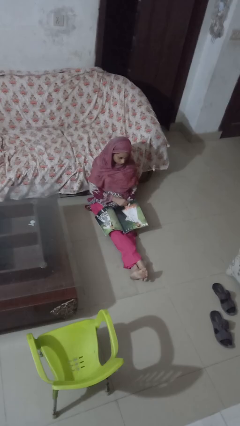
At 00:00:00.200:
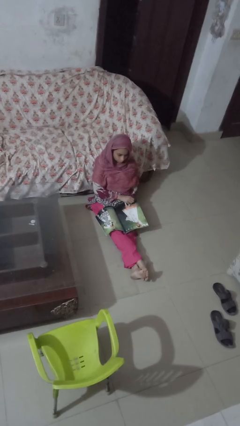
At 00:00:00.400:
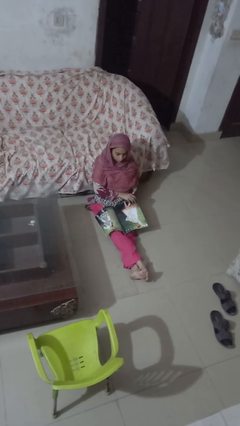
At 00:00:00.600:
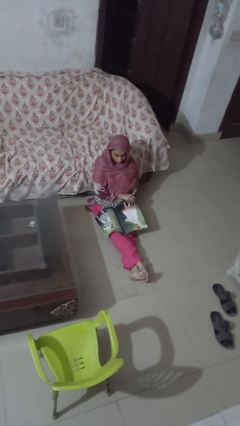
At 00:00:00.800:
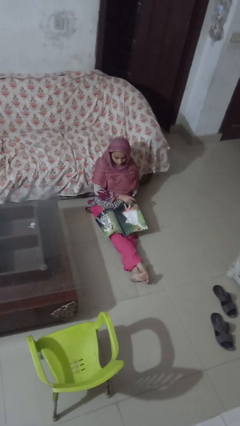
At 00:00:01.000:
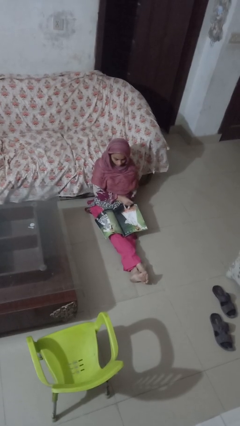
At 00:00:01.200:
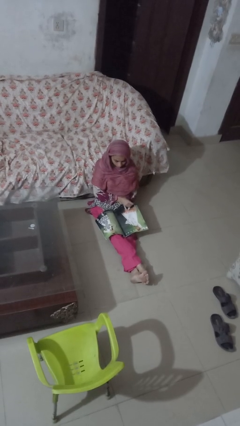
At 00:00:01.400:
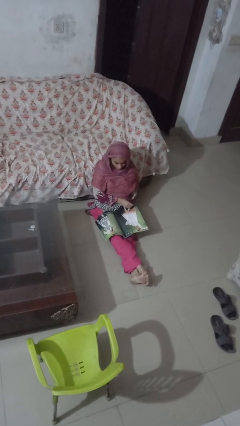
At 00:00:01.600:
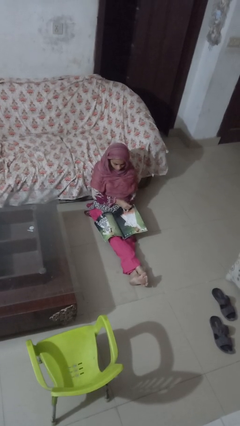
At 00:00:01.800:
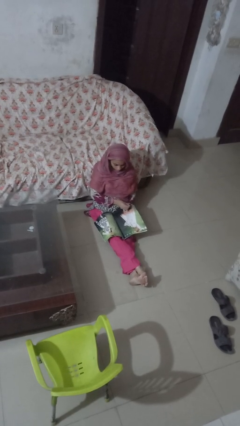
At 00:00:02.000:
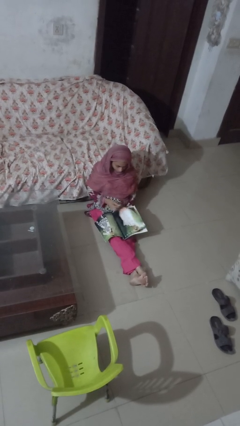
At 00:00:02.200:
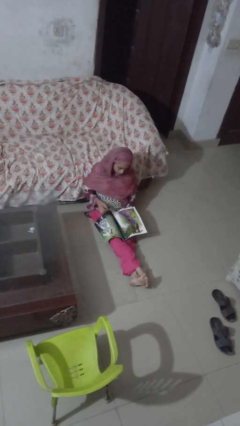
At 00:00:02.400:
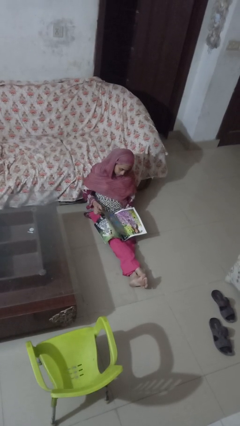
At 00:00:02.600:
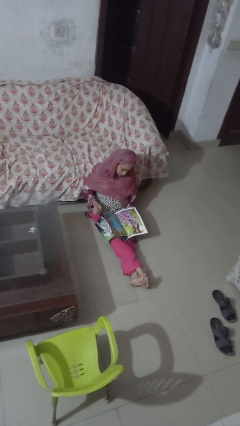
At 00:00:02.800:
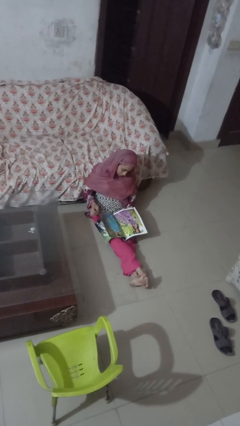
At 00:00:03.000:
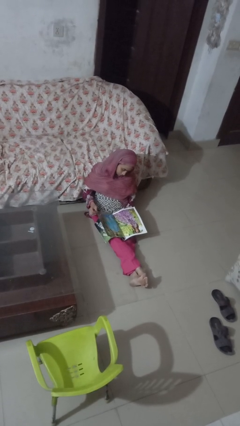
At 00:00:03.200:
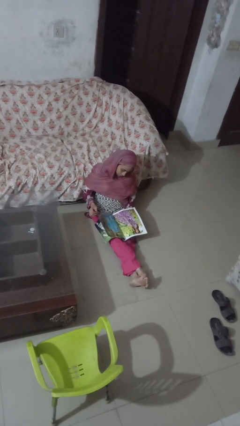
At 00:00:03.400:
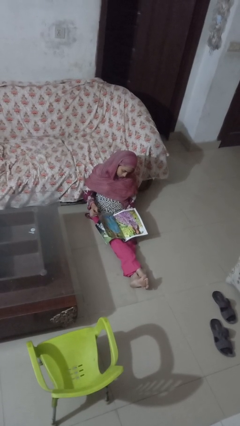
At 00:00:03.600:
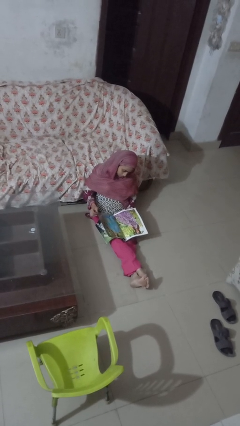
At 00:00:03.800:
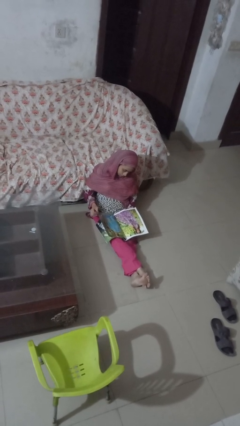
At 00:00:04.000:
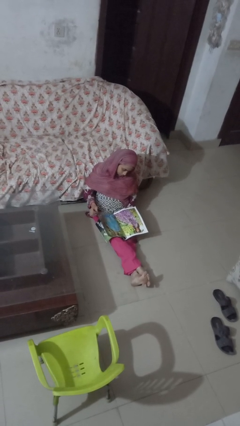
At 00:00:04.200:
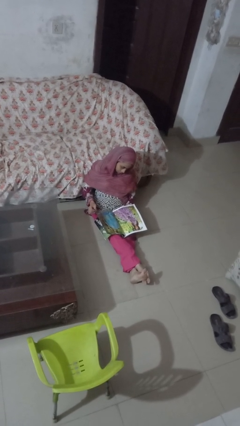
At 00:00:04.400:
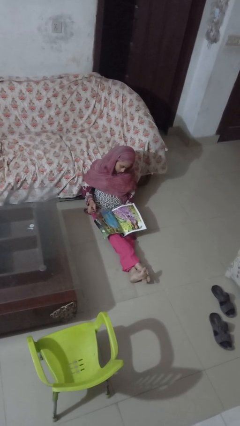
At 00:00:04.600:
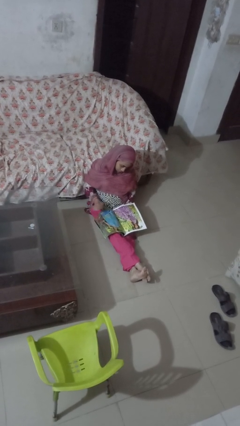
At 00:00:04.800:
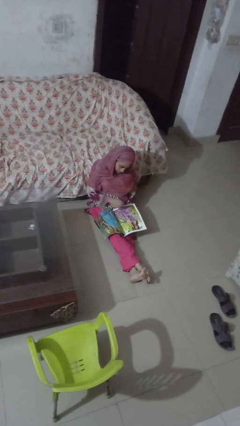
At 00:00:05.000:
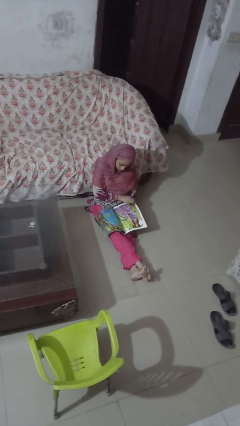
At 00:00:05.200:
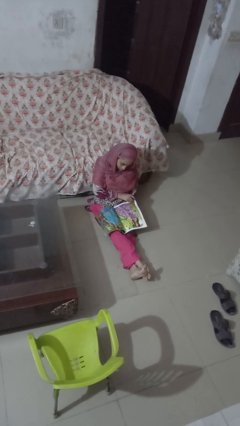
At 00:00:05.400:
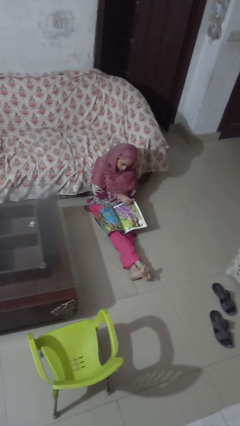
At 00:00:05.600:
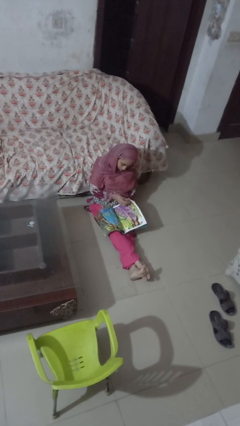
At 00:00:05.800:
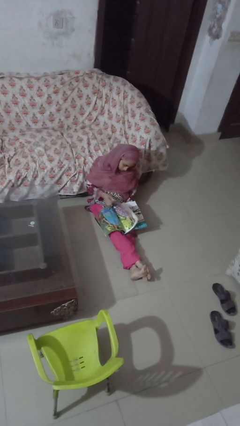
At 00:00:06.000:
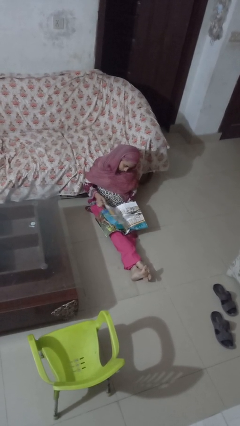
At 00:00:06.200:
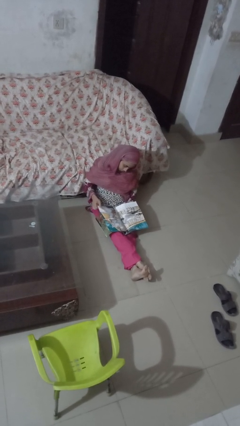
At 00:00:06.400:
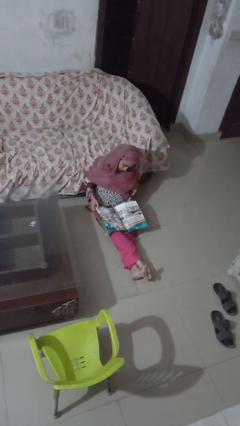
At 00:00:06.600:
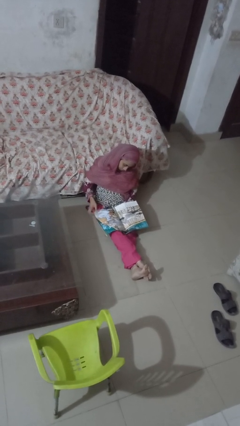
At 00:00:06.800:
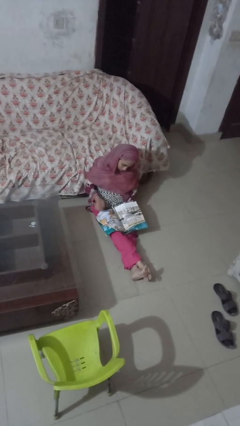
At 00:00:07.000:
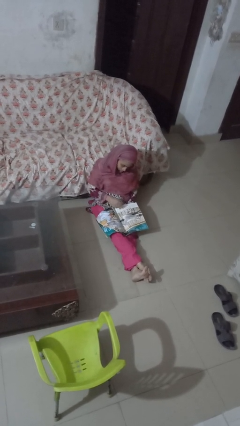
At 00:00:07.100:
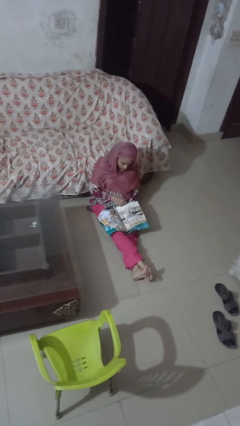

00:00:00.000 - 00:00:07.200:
person reads magazine

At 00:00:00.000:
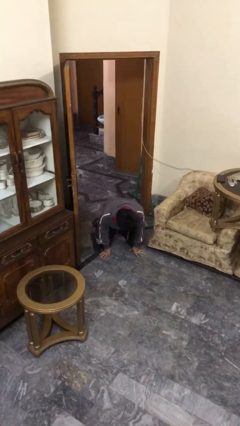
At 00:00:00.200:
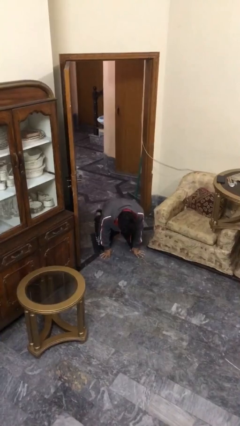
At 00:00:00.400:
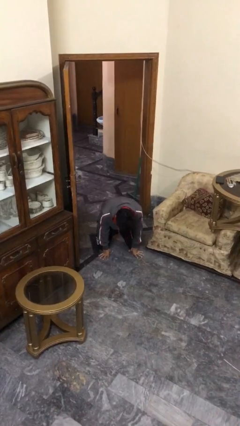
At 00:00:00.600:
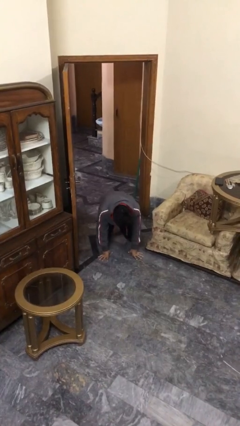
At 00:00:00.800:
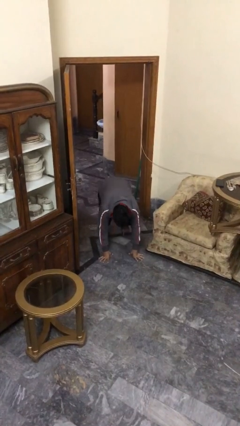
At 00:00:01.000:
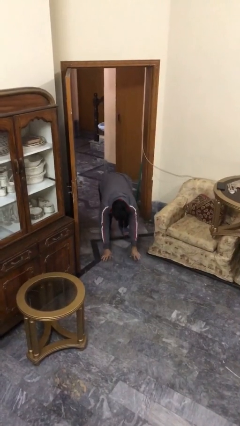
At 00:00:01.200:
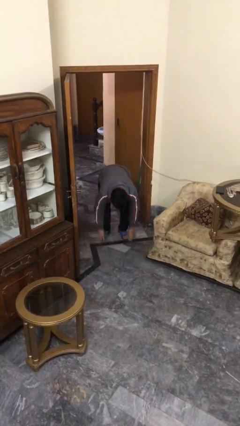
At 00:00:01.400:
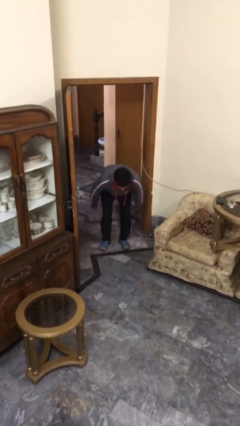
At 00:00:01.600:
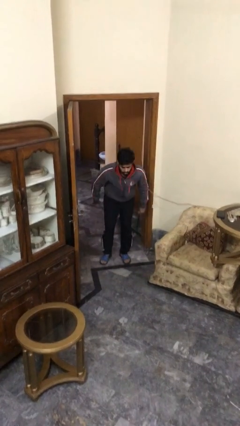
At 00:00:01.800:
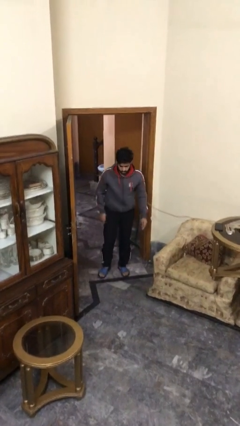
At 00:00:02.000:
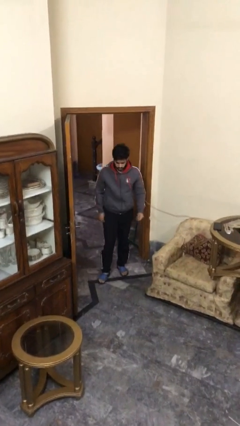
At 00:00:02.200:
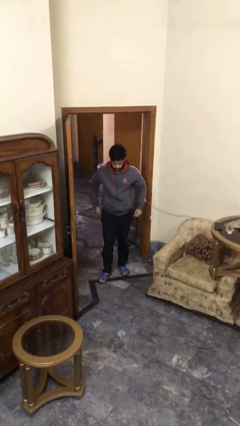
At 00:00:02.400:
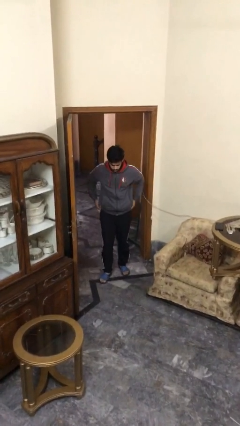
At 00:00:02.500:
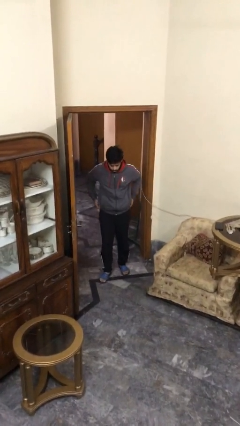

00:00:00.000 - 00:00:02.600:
person stands up

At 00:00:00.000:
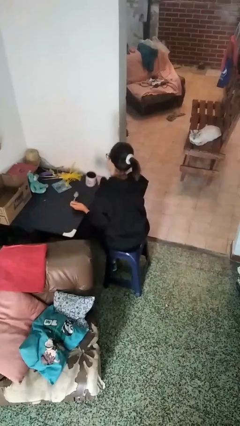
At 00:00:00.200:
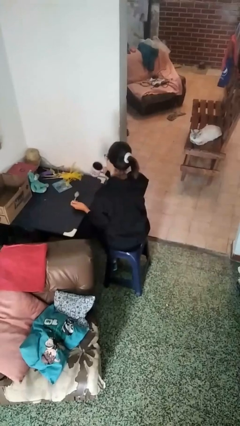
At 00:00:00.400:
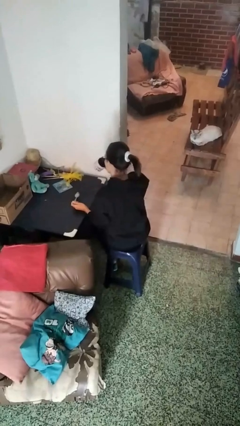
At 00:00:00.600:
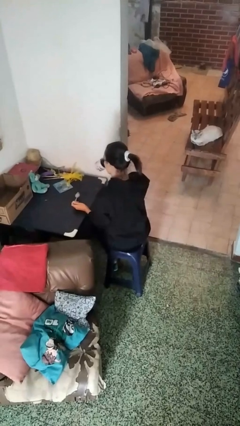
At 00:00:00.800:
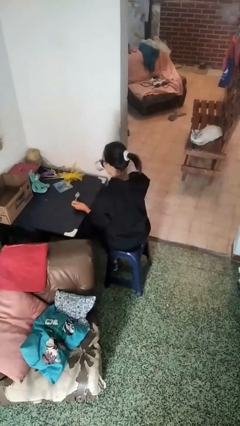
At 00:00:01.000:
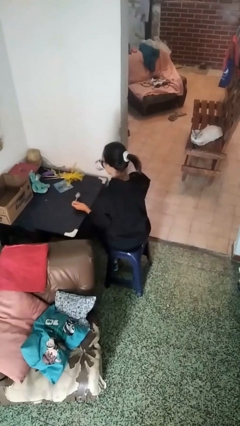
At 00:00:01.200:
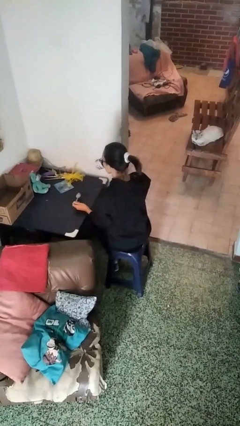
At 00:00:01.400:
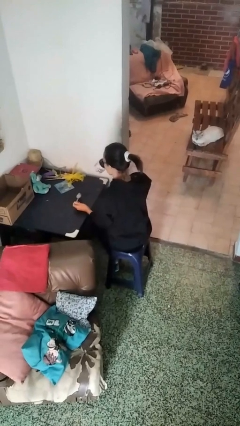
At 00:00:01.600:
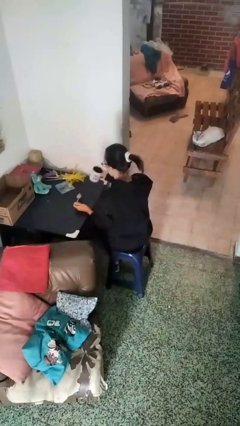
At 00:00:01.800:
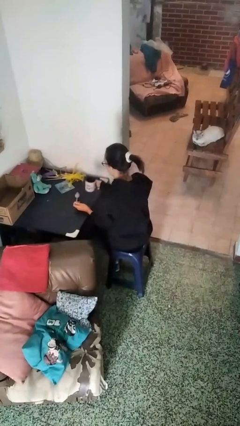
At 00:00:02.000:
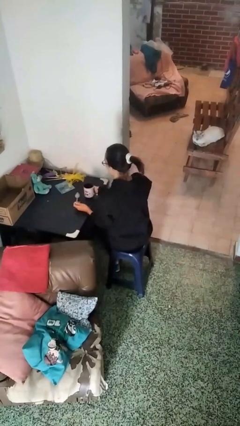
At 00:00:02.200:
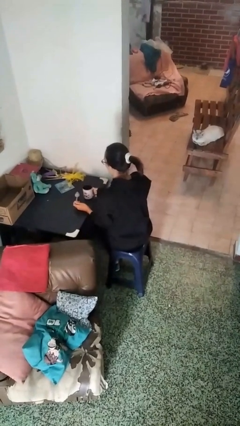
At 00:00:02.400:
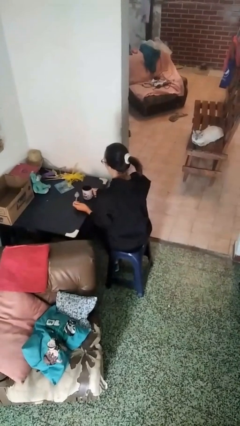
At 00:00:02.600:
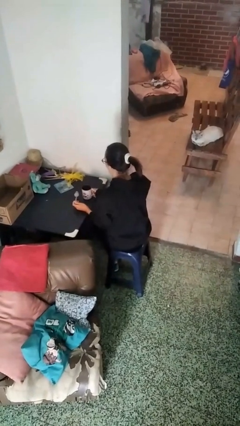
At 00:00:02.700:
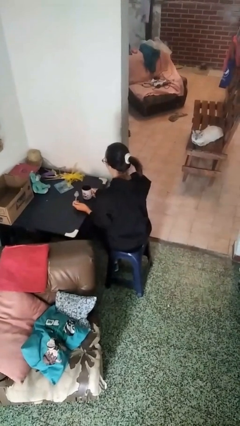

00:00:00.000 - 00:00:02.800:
person drinks from mug

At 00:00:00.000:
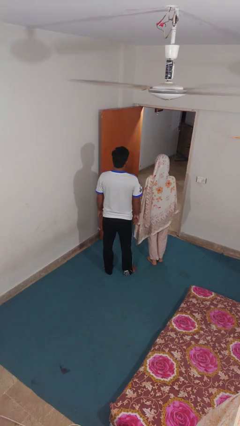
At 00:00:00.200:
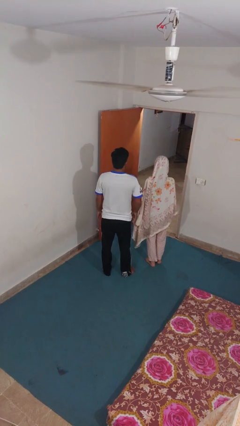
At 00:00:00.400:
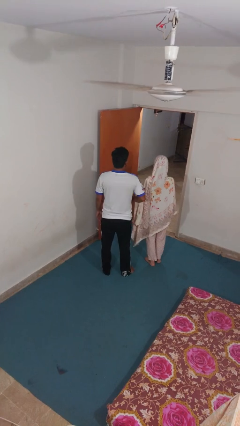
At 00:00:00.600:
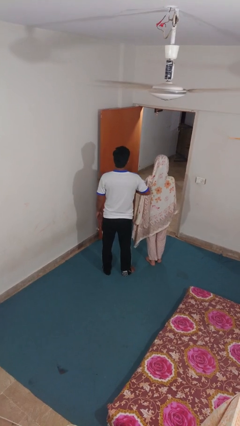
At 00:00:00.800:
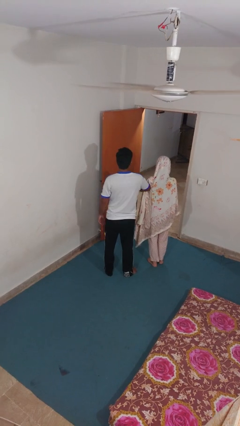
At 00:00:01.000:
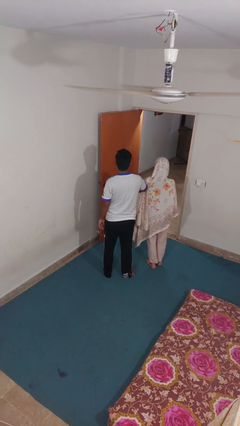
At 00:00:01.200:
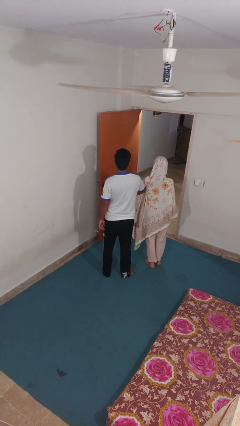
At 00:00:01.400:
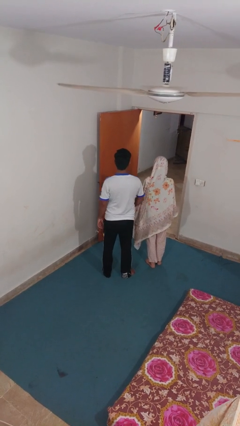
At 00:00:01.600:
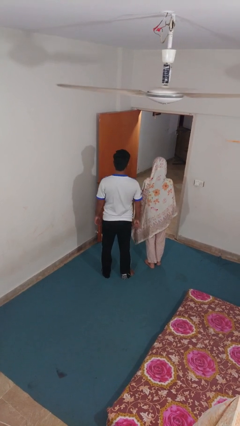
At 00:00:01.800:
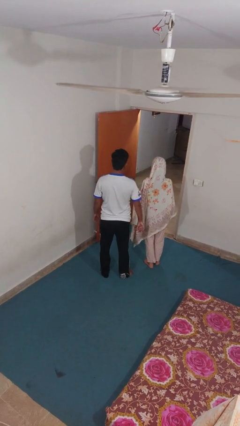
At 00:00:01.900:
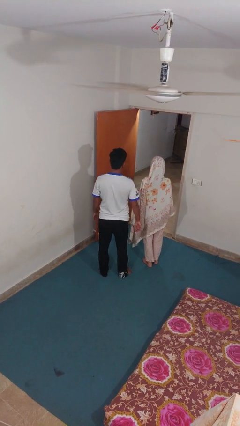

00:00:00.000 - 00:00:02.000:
person nudges person with elbow

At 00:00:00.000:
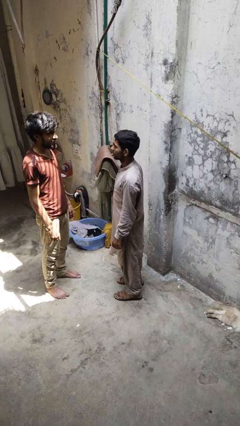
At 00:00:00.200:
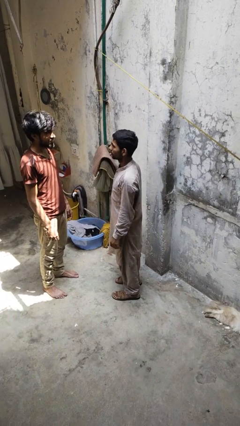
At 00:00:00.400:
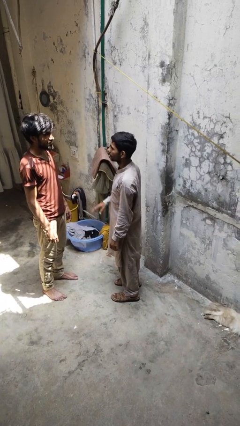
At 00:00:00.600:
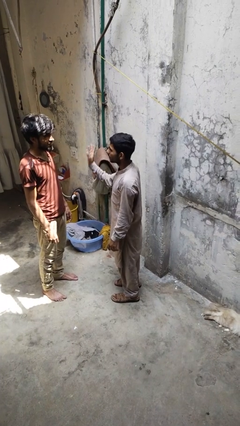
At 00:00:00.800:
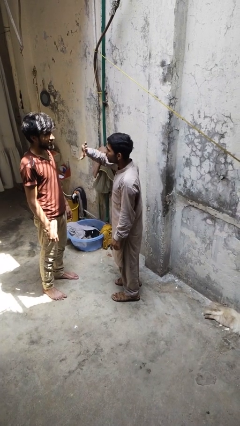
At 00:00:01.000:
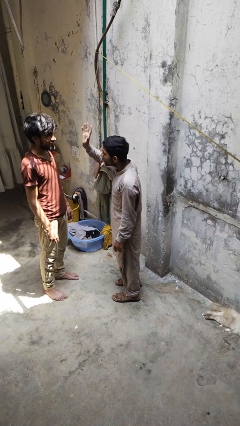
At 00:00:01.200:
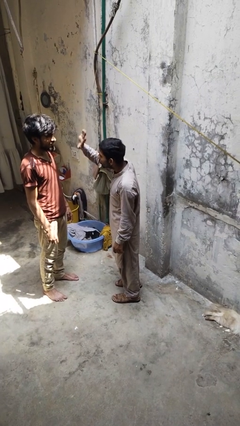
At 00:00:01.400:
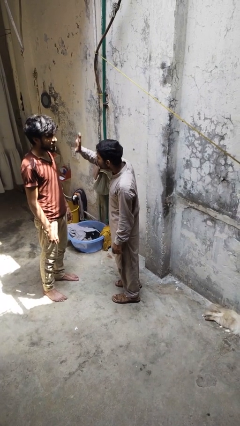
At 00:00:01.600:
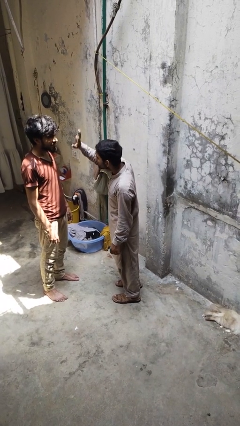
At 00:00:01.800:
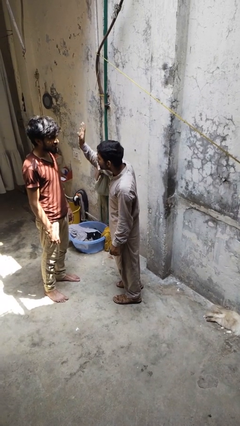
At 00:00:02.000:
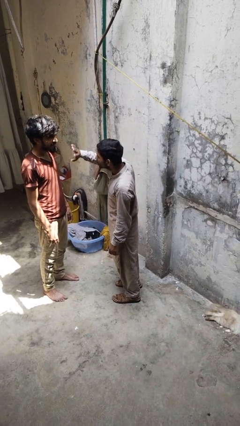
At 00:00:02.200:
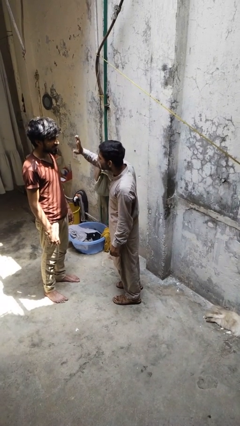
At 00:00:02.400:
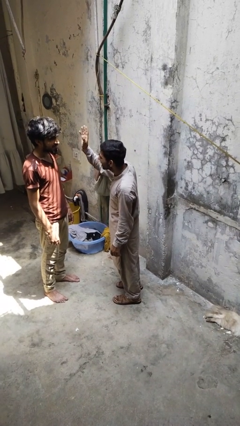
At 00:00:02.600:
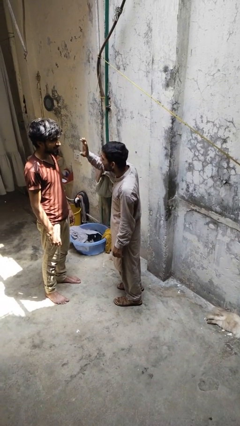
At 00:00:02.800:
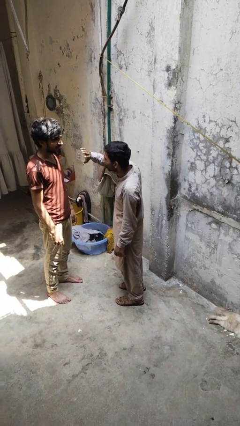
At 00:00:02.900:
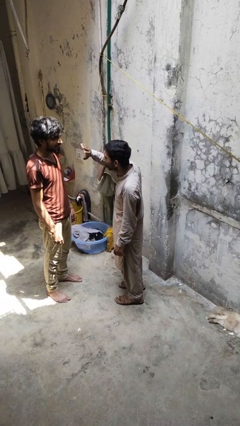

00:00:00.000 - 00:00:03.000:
person waves at person
